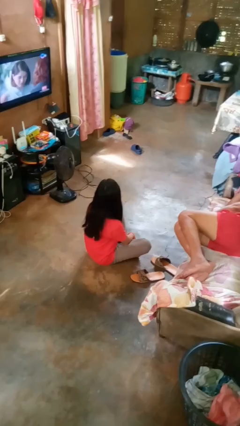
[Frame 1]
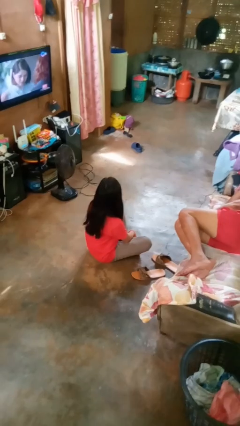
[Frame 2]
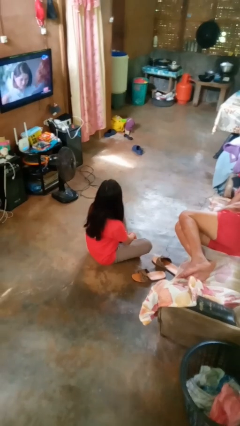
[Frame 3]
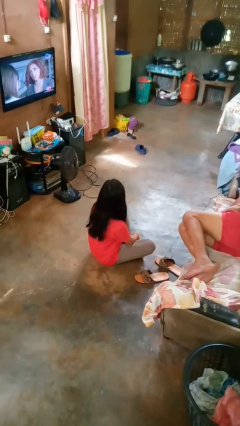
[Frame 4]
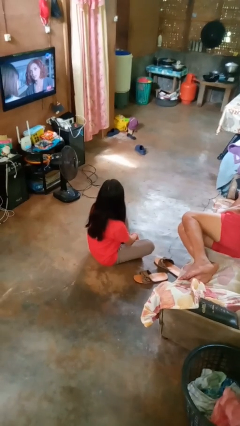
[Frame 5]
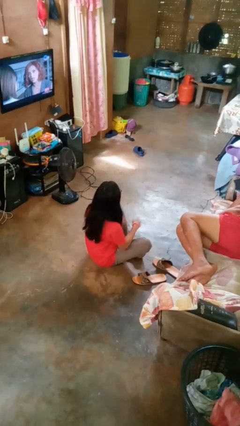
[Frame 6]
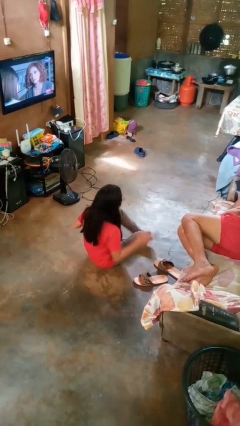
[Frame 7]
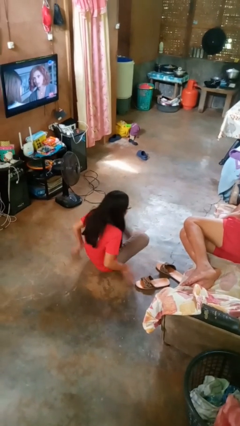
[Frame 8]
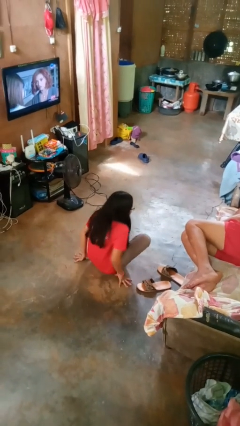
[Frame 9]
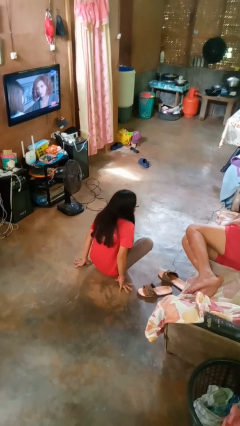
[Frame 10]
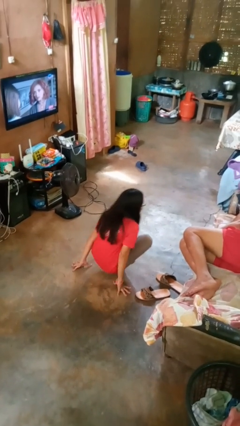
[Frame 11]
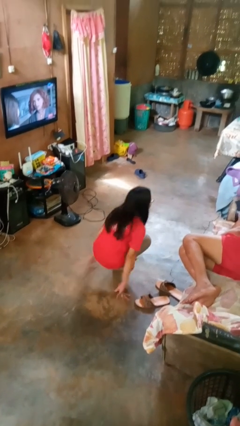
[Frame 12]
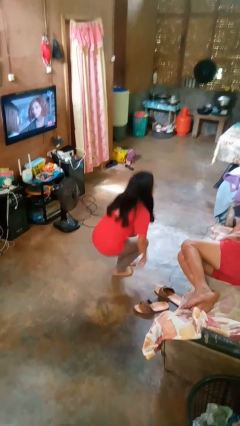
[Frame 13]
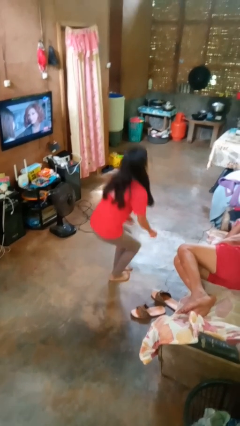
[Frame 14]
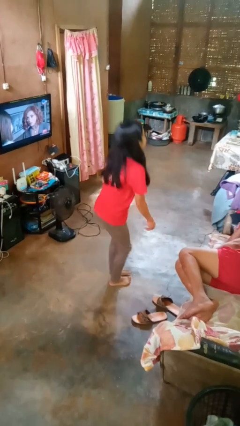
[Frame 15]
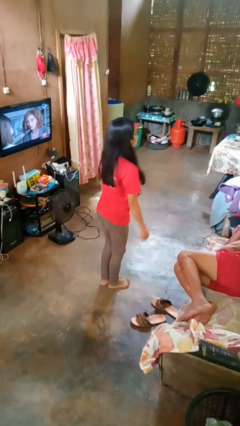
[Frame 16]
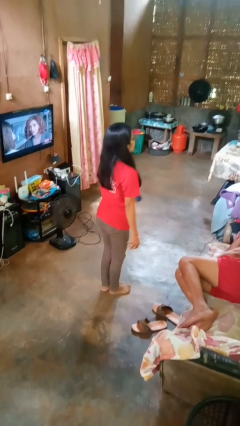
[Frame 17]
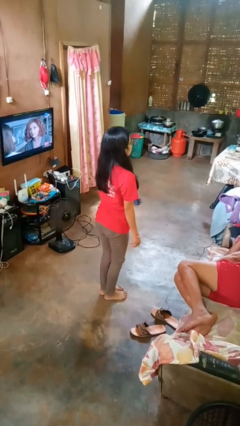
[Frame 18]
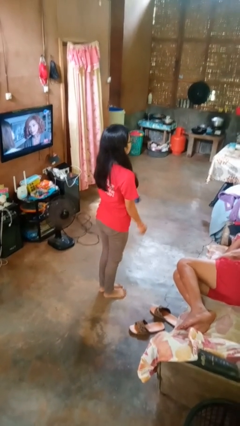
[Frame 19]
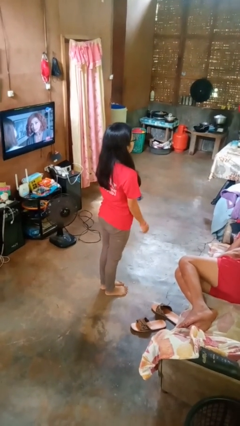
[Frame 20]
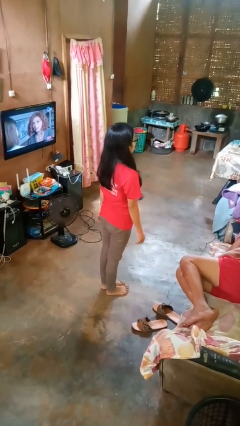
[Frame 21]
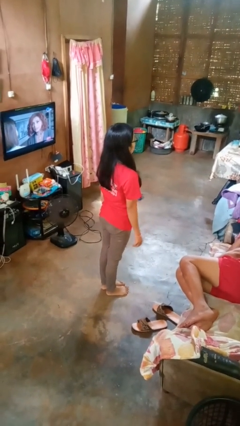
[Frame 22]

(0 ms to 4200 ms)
person stands up from floor

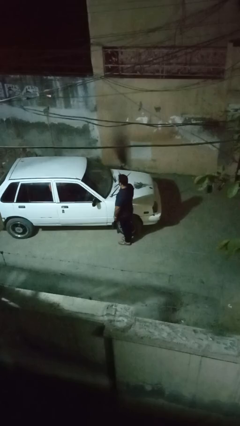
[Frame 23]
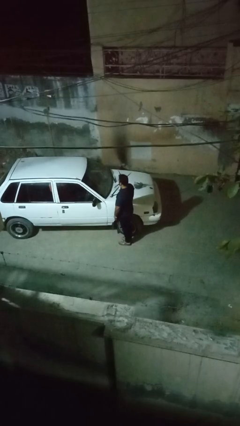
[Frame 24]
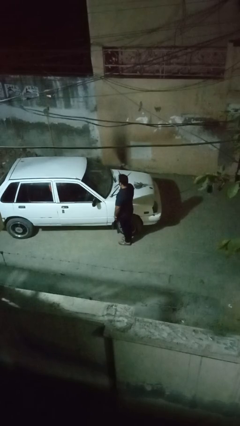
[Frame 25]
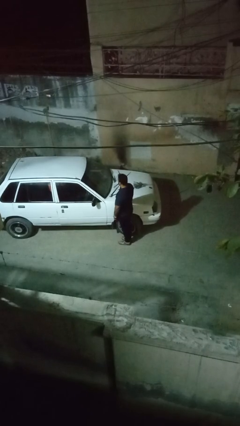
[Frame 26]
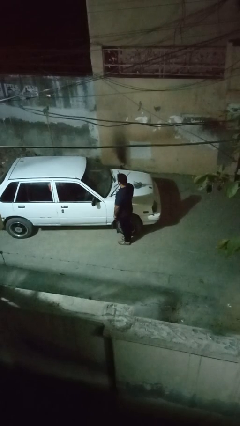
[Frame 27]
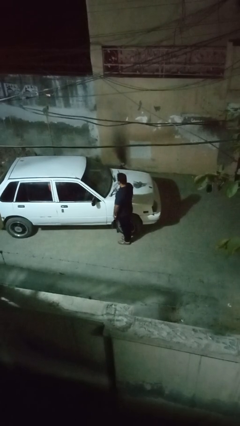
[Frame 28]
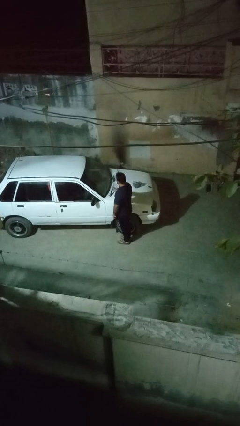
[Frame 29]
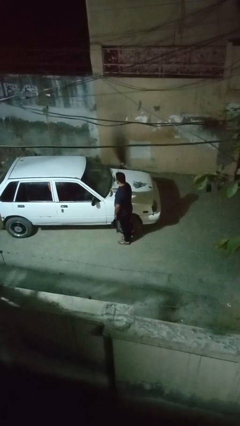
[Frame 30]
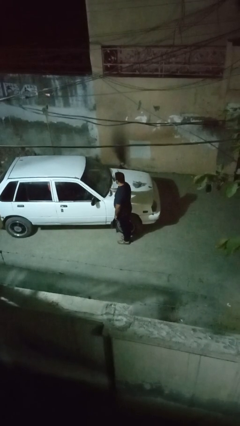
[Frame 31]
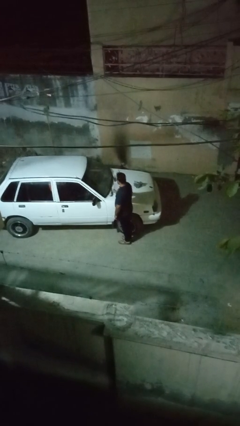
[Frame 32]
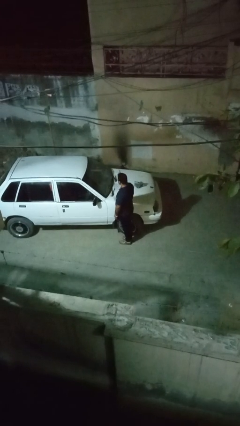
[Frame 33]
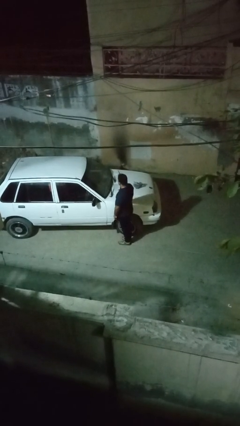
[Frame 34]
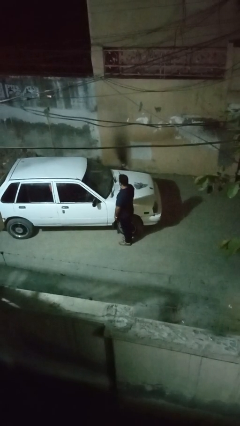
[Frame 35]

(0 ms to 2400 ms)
person flips down car wipers

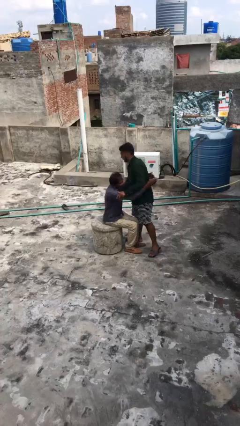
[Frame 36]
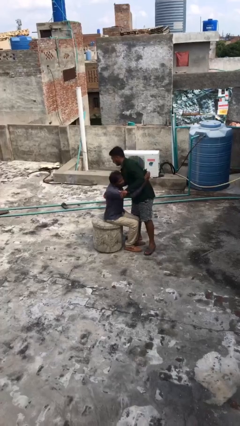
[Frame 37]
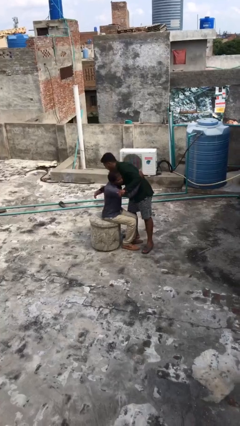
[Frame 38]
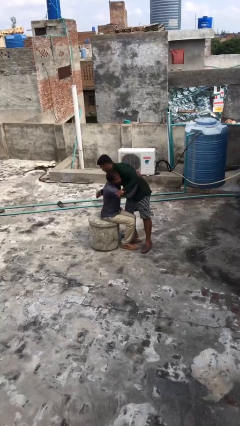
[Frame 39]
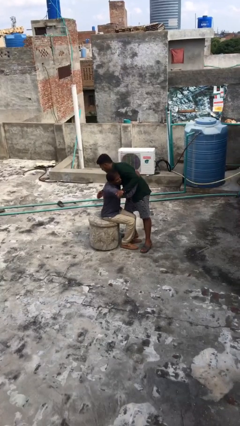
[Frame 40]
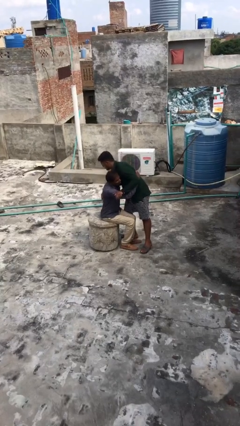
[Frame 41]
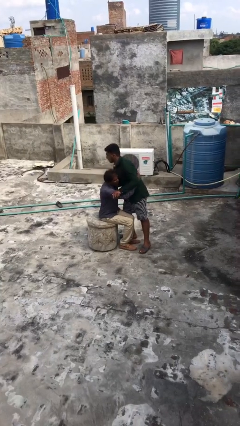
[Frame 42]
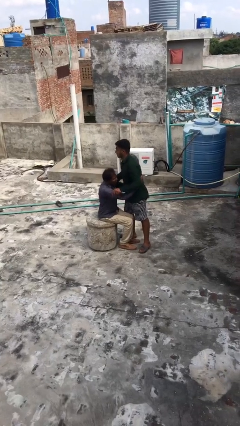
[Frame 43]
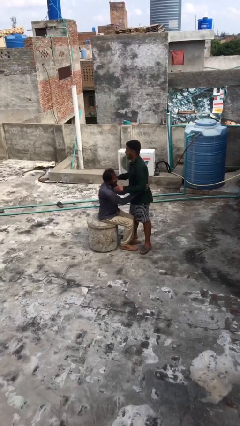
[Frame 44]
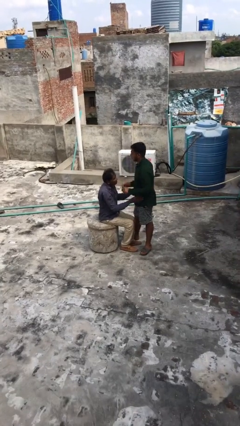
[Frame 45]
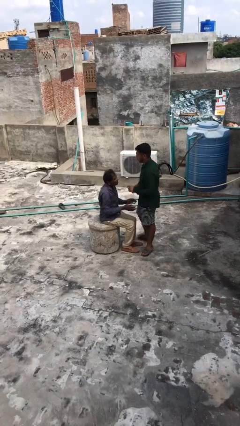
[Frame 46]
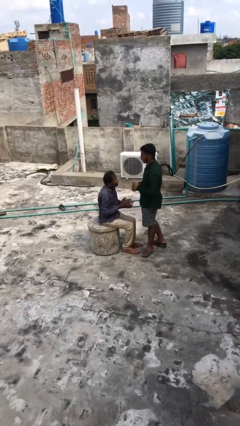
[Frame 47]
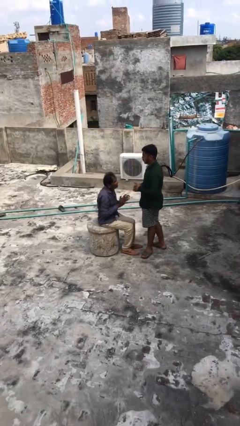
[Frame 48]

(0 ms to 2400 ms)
person embraces person

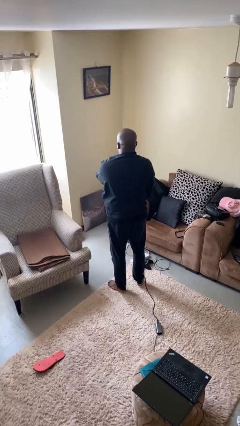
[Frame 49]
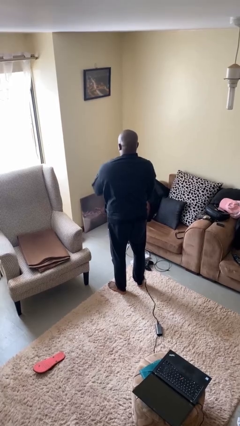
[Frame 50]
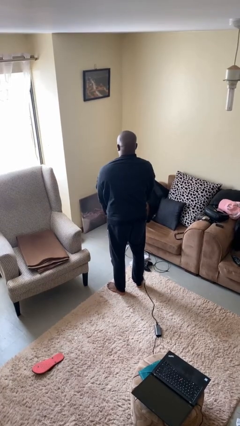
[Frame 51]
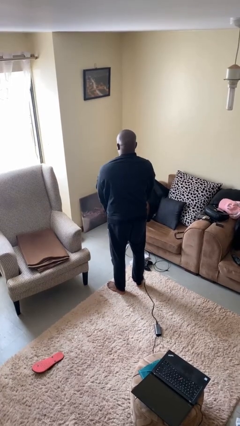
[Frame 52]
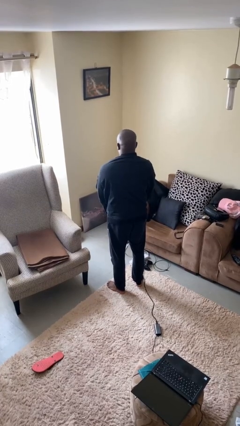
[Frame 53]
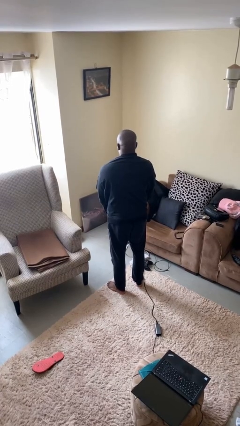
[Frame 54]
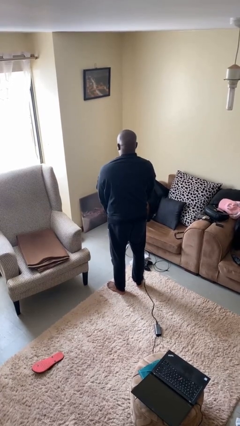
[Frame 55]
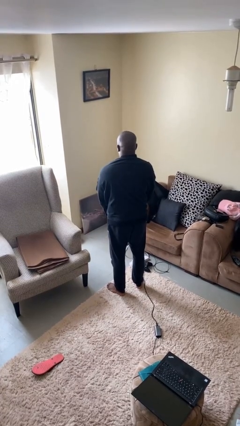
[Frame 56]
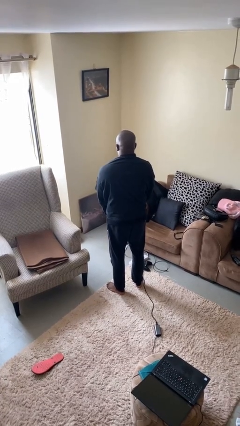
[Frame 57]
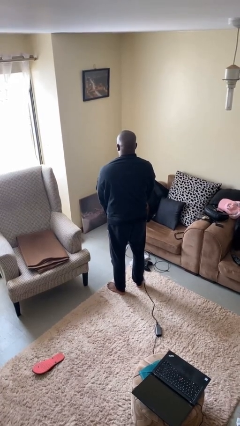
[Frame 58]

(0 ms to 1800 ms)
person unzips jacket

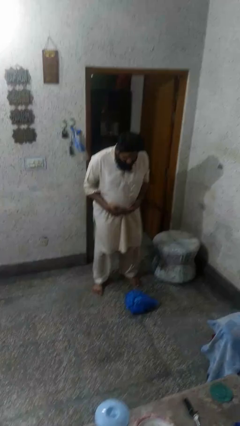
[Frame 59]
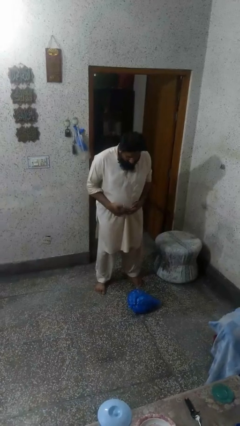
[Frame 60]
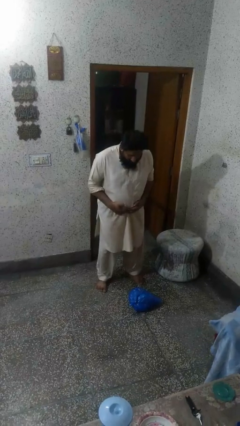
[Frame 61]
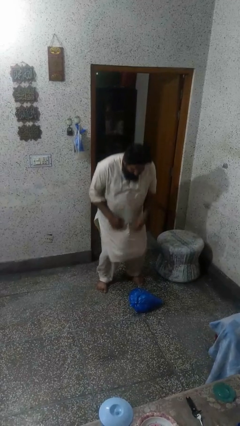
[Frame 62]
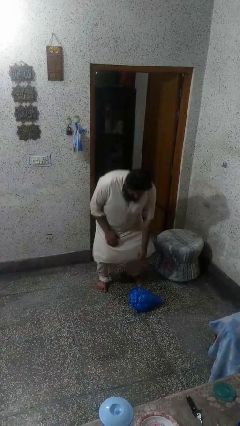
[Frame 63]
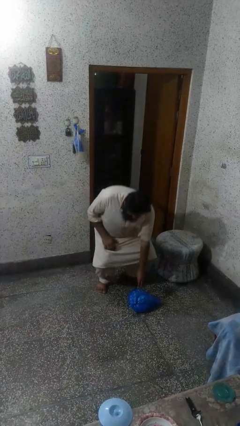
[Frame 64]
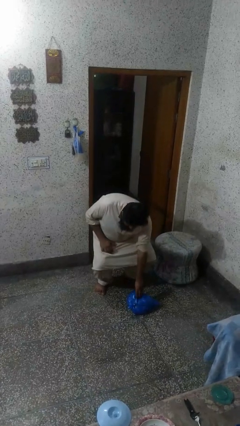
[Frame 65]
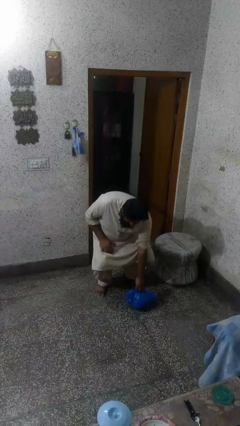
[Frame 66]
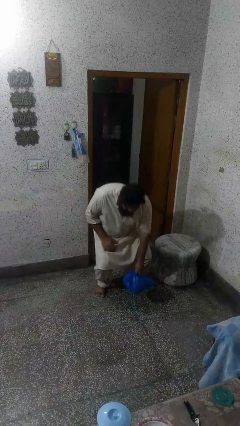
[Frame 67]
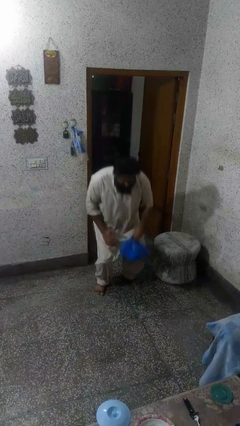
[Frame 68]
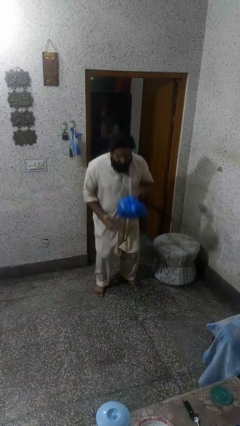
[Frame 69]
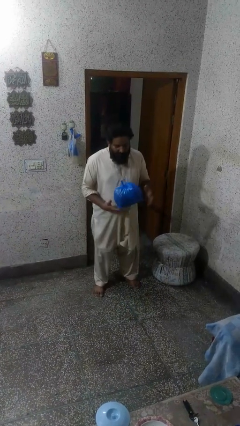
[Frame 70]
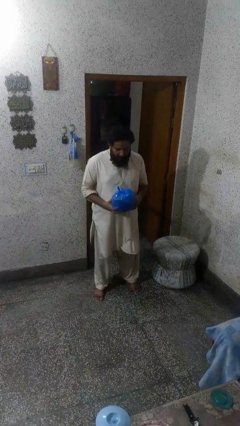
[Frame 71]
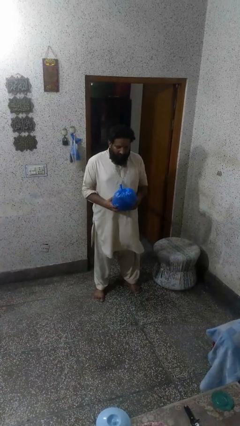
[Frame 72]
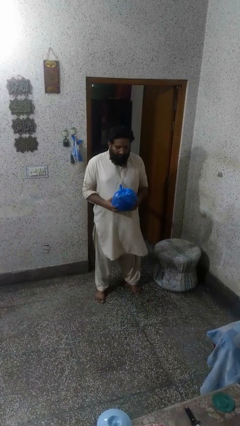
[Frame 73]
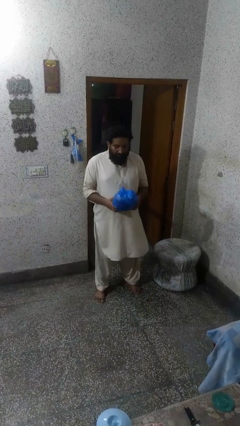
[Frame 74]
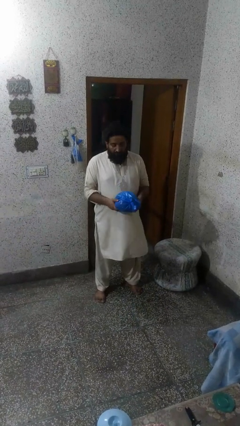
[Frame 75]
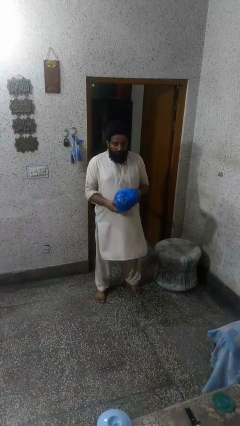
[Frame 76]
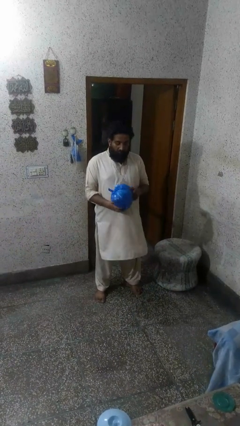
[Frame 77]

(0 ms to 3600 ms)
person picks up object from floor

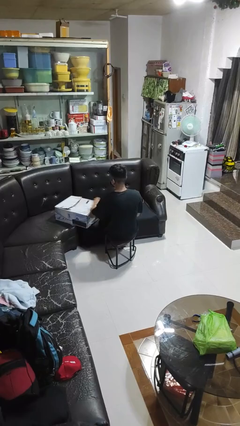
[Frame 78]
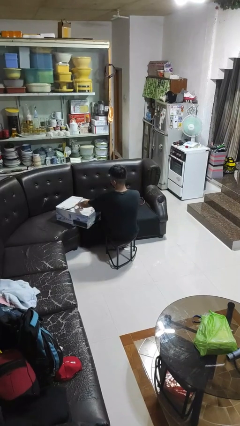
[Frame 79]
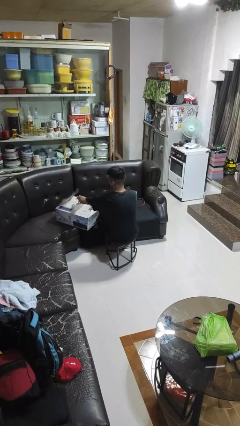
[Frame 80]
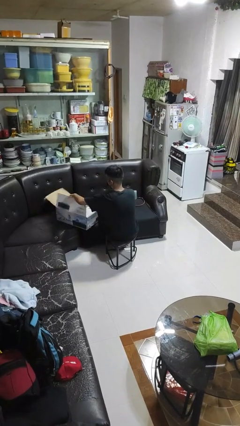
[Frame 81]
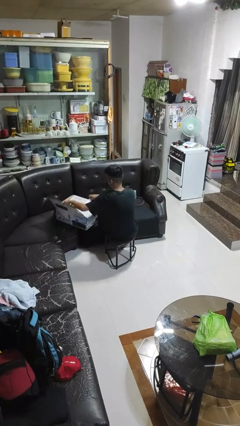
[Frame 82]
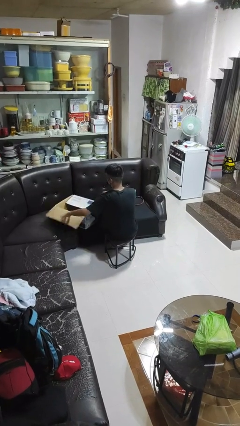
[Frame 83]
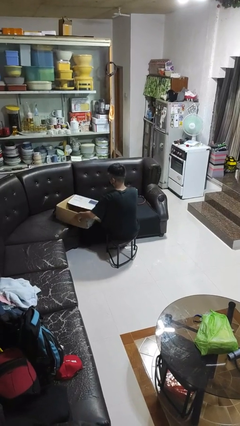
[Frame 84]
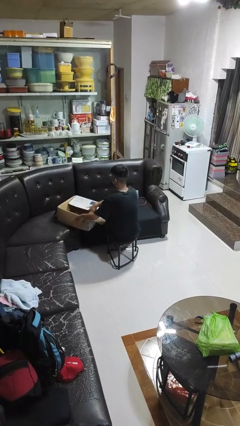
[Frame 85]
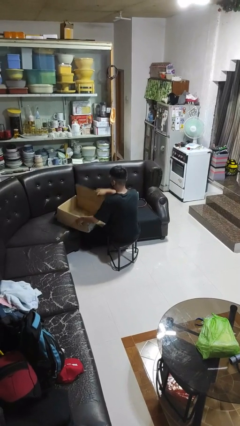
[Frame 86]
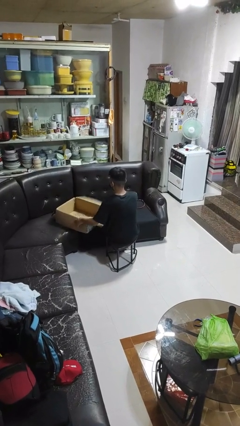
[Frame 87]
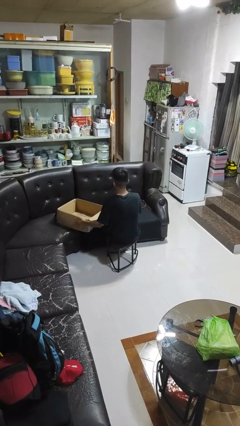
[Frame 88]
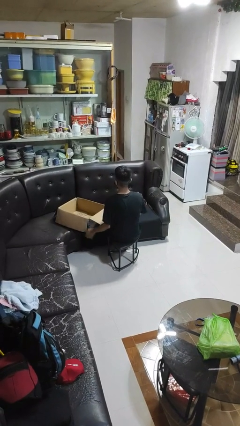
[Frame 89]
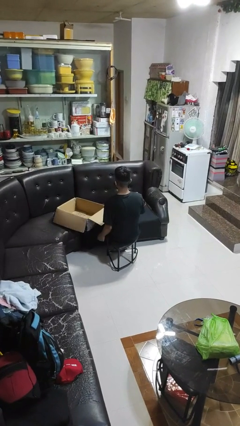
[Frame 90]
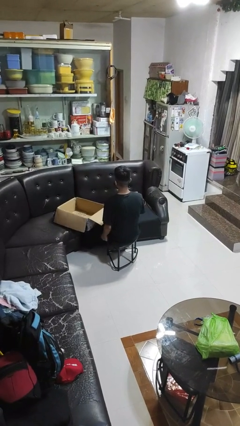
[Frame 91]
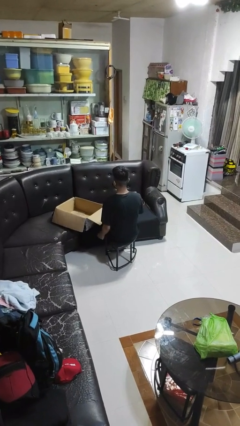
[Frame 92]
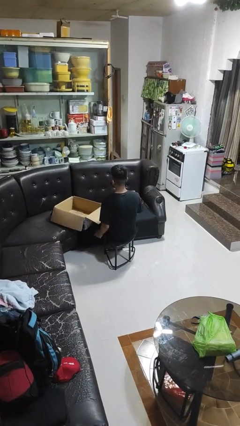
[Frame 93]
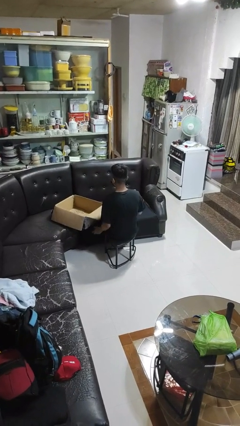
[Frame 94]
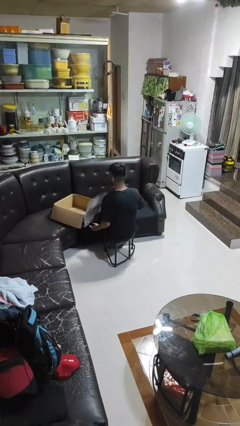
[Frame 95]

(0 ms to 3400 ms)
person opens box
